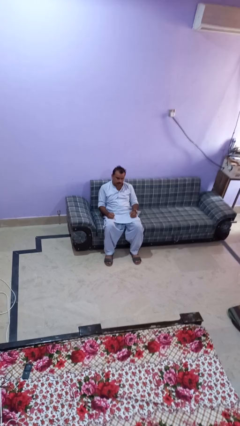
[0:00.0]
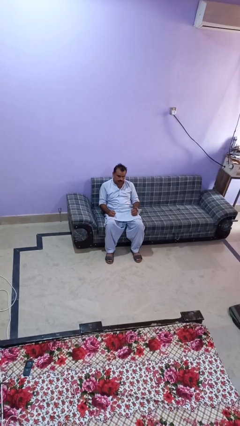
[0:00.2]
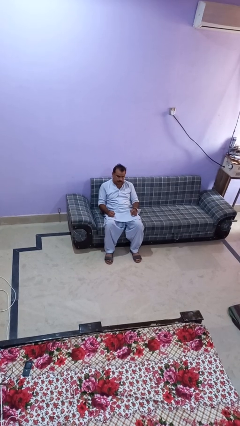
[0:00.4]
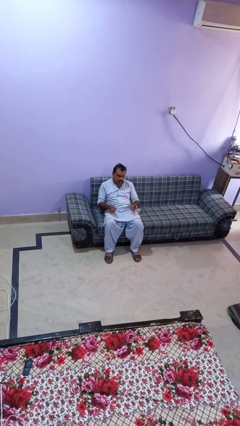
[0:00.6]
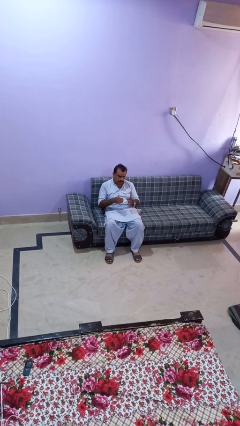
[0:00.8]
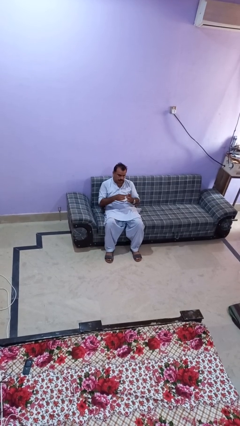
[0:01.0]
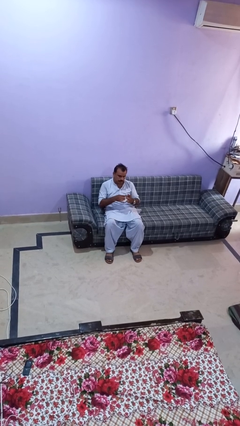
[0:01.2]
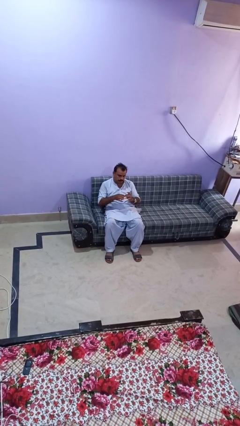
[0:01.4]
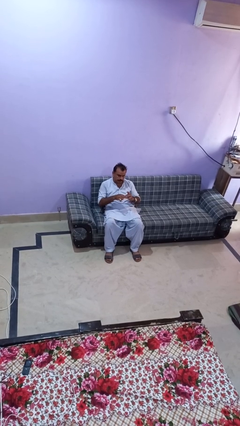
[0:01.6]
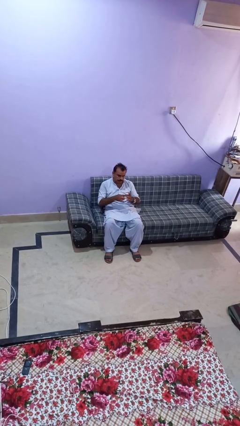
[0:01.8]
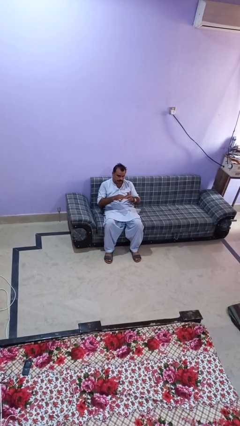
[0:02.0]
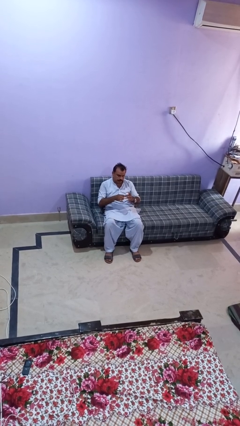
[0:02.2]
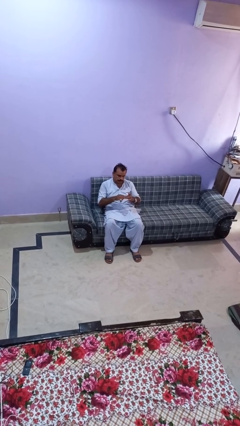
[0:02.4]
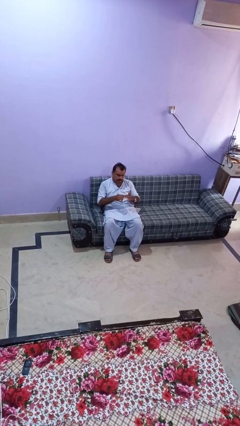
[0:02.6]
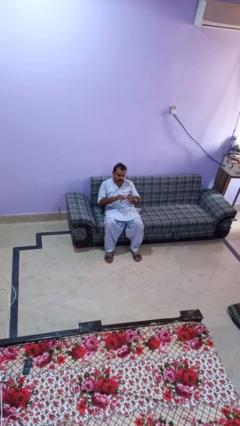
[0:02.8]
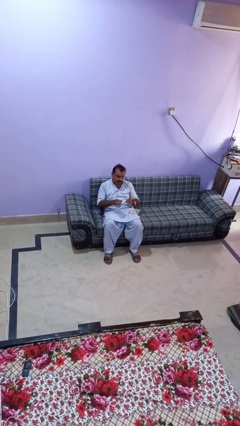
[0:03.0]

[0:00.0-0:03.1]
person files fingernails

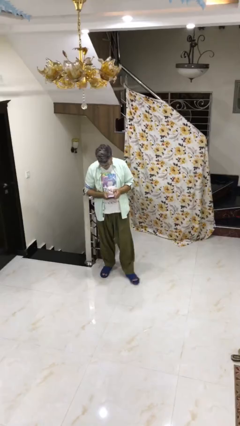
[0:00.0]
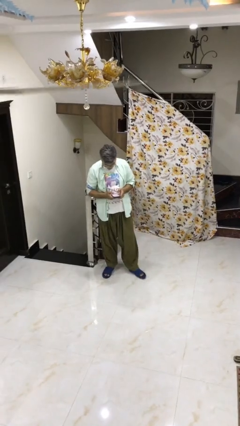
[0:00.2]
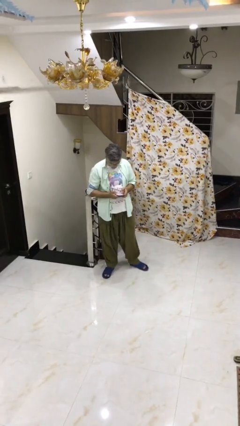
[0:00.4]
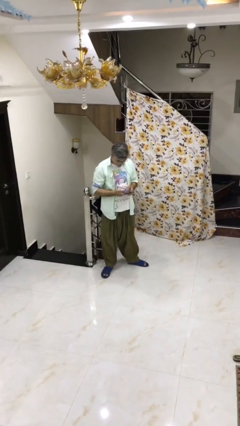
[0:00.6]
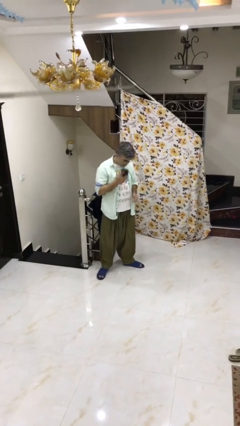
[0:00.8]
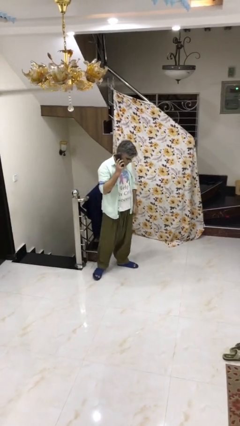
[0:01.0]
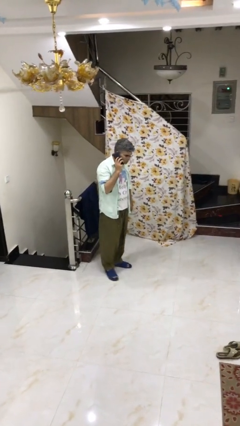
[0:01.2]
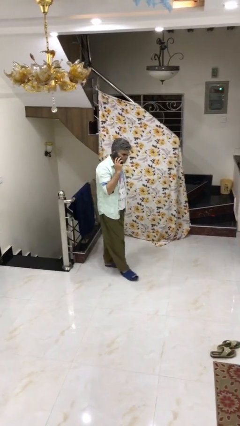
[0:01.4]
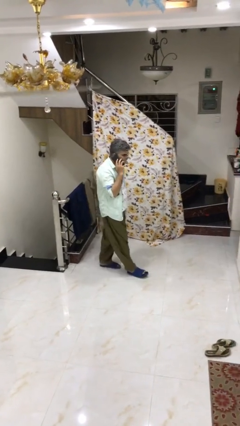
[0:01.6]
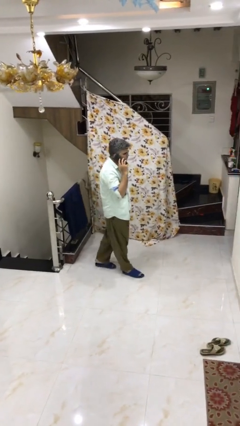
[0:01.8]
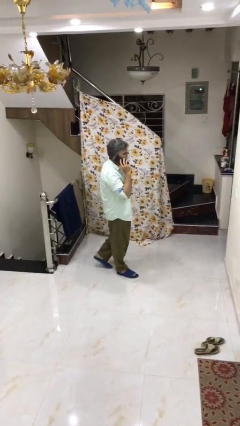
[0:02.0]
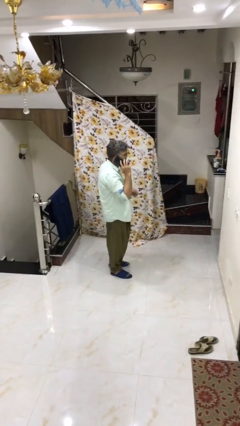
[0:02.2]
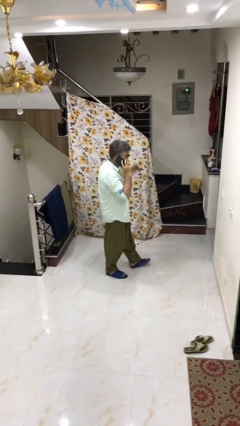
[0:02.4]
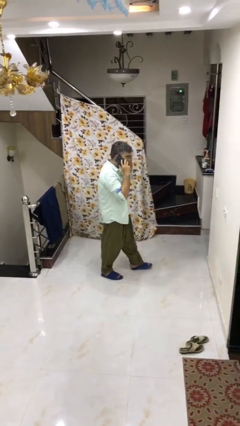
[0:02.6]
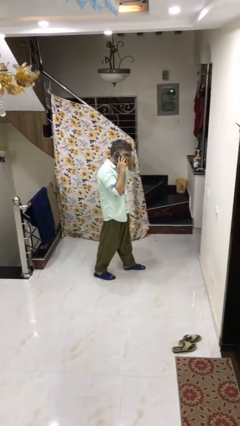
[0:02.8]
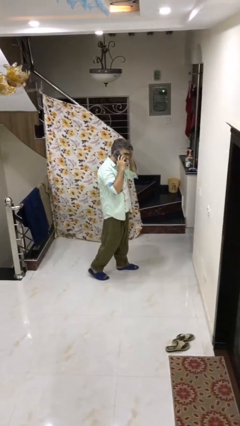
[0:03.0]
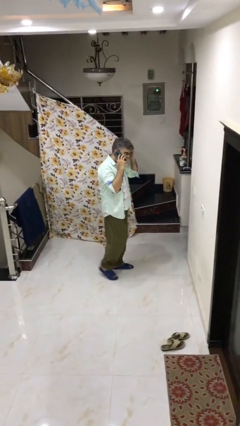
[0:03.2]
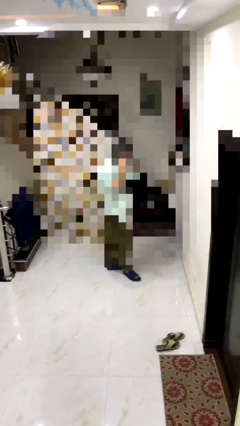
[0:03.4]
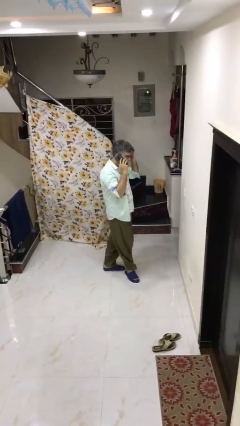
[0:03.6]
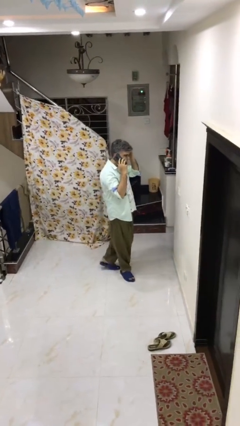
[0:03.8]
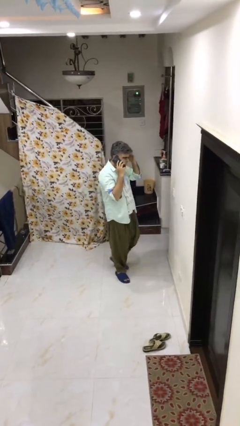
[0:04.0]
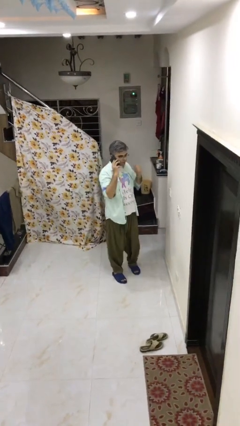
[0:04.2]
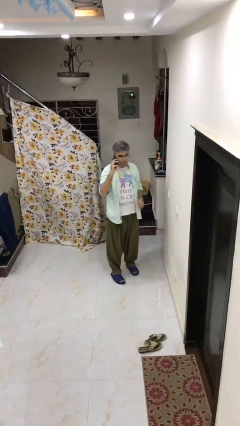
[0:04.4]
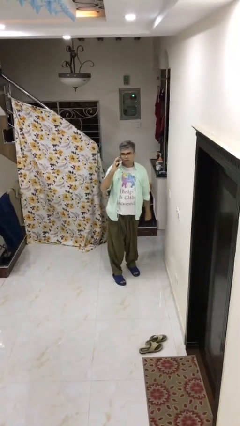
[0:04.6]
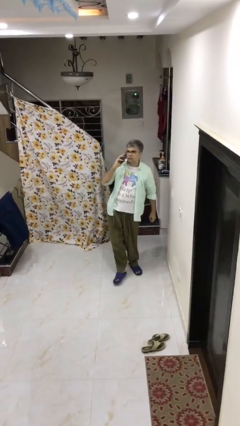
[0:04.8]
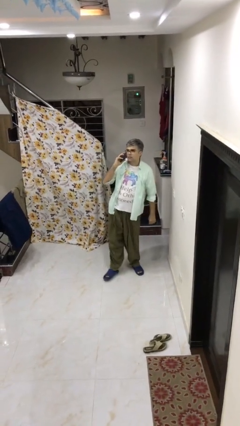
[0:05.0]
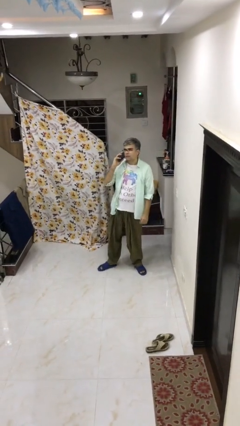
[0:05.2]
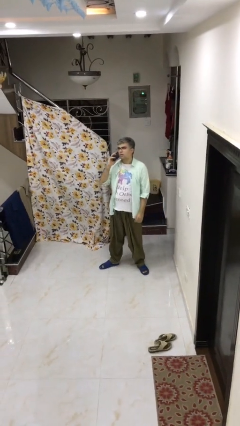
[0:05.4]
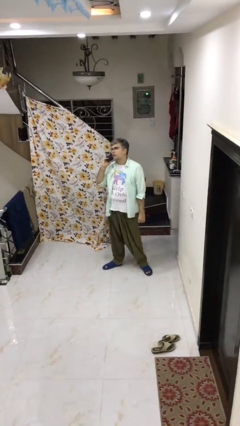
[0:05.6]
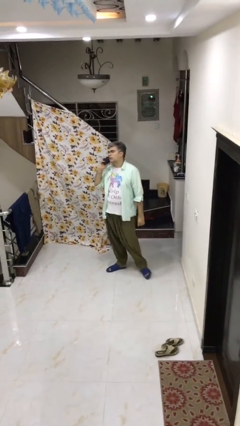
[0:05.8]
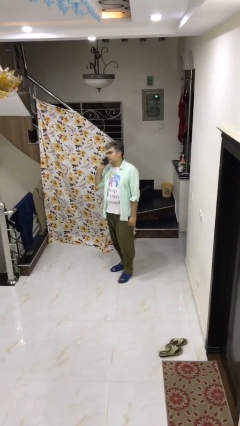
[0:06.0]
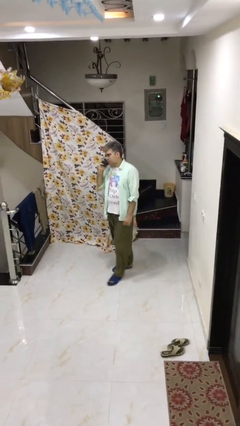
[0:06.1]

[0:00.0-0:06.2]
person talks on phone

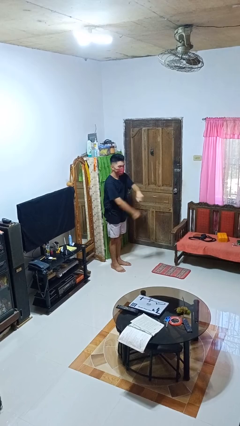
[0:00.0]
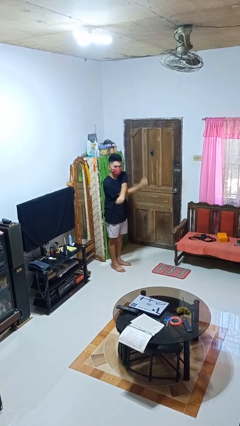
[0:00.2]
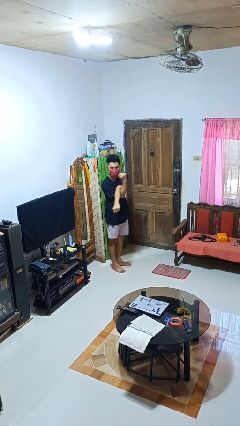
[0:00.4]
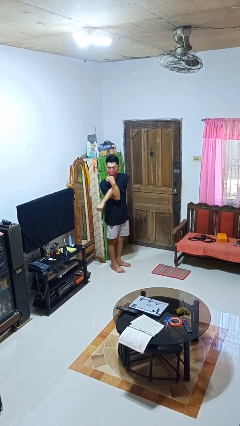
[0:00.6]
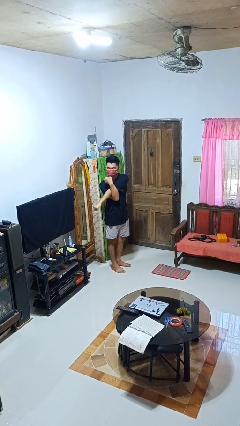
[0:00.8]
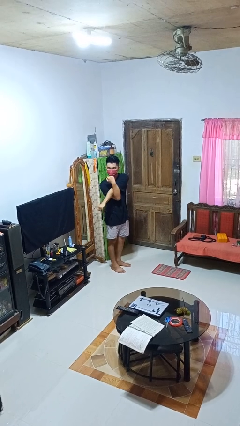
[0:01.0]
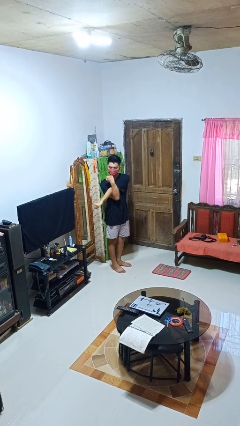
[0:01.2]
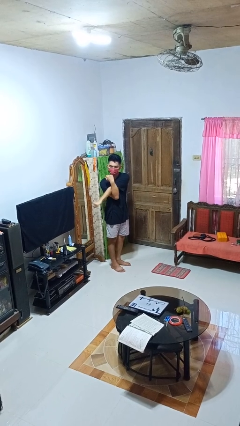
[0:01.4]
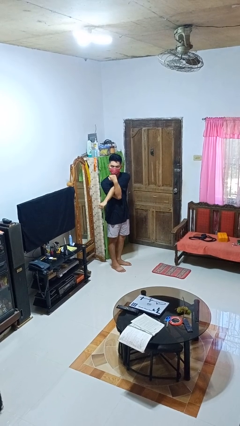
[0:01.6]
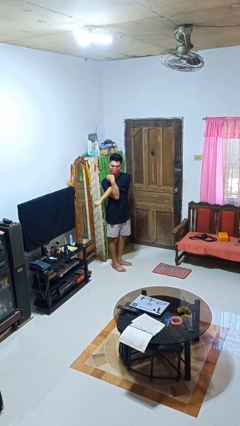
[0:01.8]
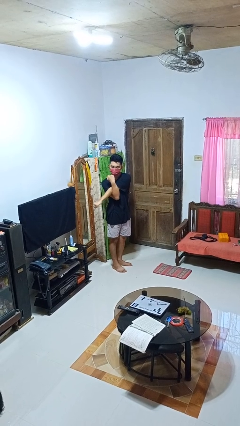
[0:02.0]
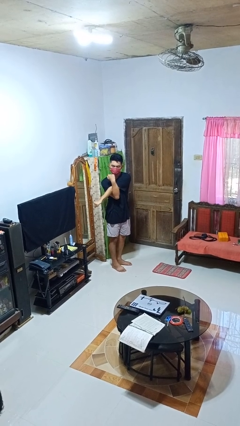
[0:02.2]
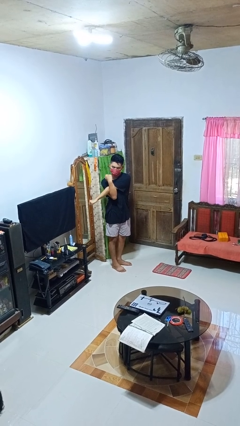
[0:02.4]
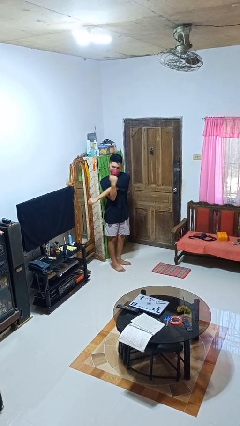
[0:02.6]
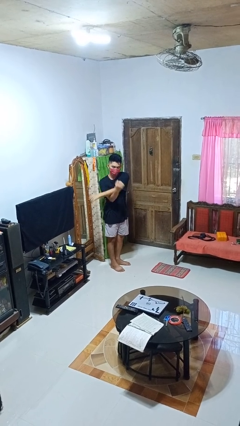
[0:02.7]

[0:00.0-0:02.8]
person stretches arms to side

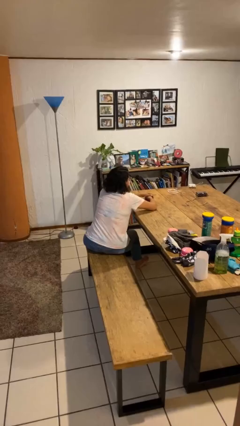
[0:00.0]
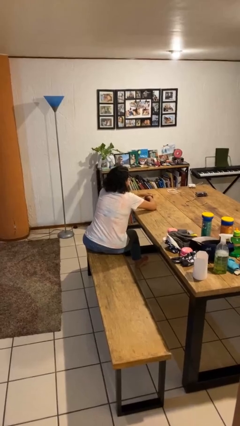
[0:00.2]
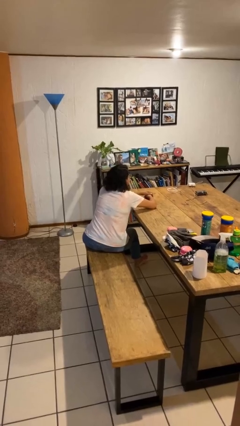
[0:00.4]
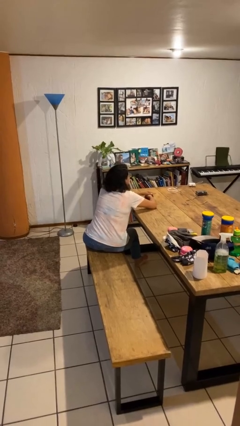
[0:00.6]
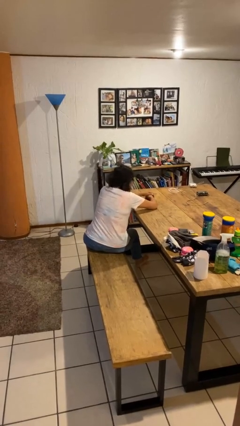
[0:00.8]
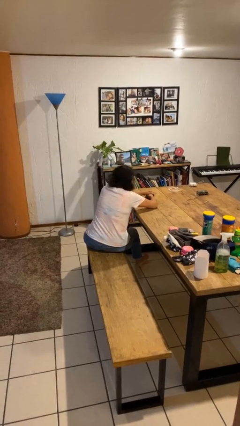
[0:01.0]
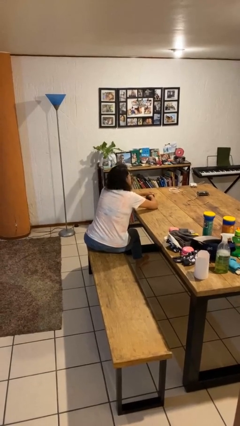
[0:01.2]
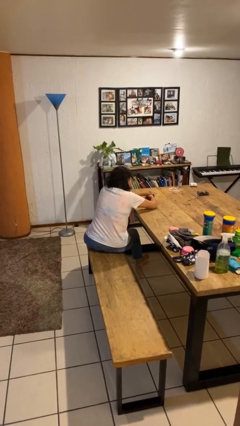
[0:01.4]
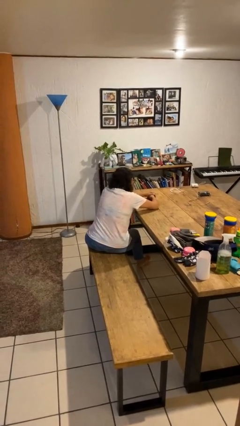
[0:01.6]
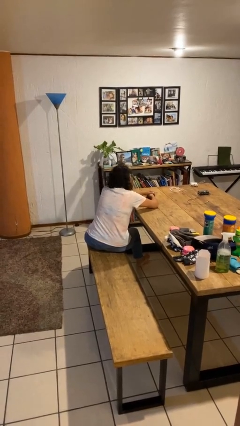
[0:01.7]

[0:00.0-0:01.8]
person nods head

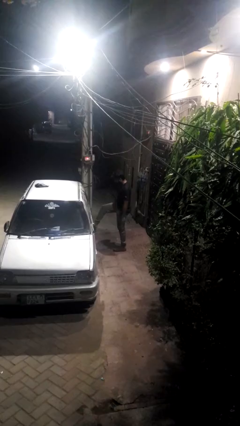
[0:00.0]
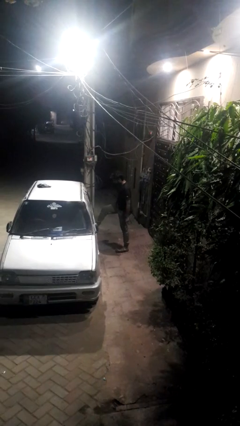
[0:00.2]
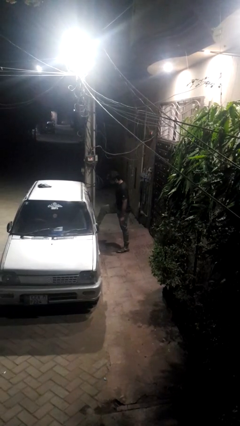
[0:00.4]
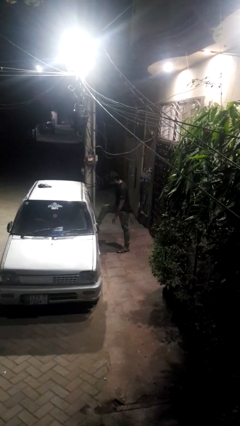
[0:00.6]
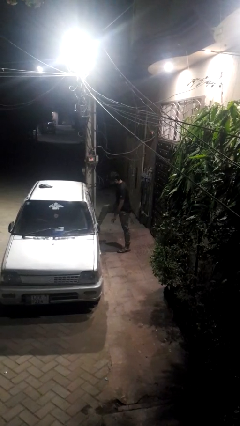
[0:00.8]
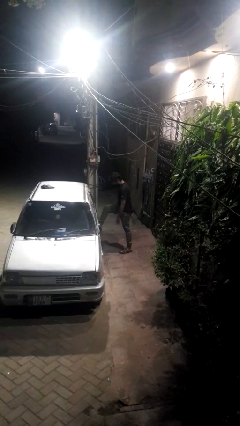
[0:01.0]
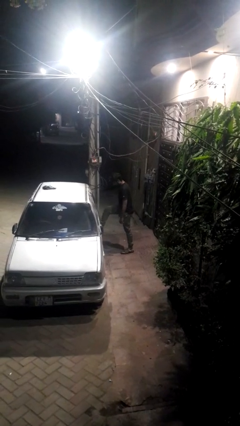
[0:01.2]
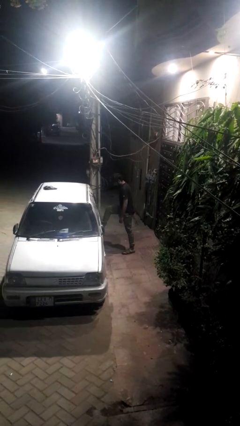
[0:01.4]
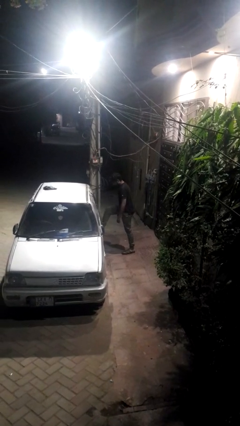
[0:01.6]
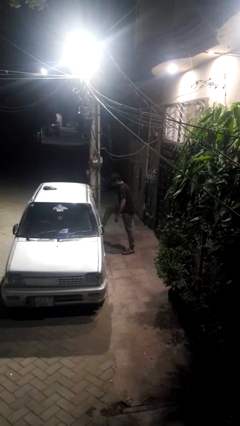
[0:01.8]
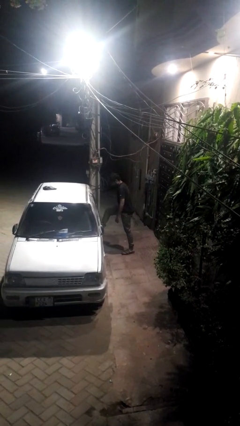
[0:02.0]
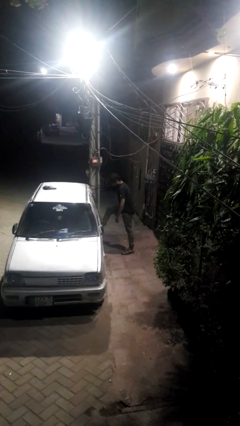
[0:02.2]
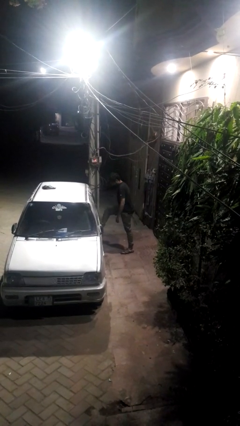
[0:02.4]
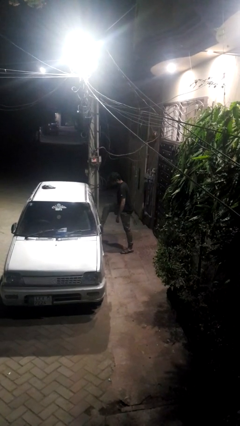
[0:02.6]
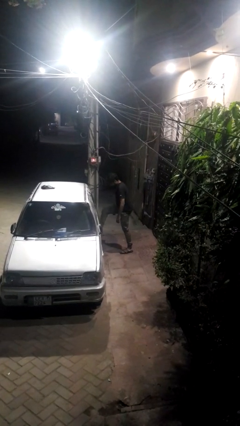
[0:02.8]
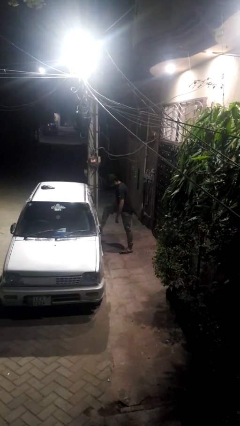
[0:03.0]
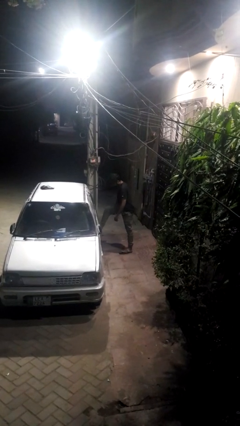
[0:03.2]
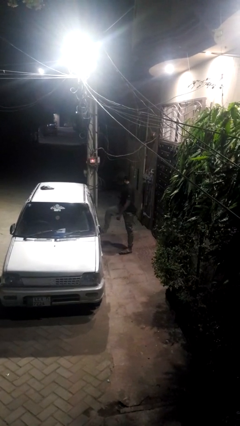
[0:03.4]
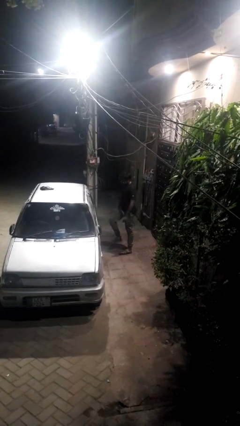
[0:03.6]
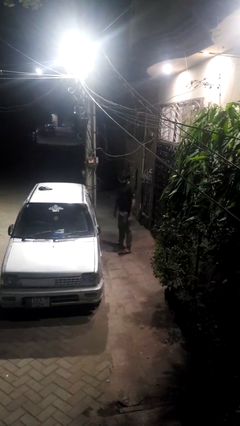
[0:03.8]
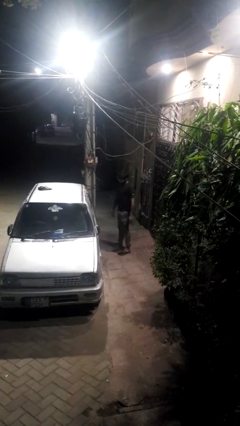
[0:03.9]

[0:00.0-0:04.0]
person kicks car tires
